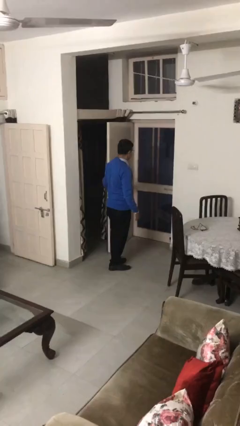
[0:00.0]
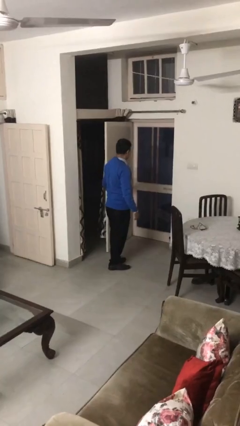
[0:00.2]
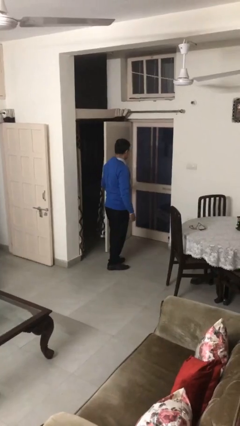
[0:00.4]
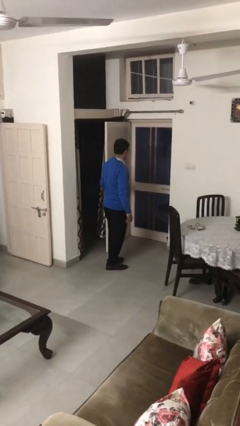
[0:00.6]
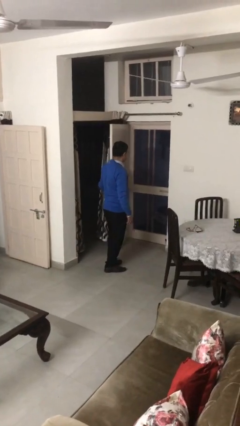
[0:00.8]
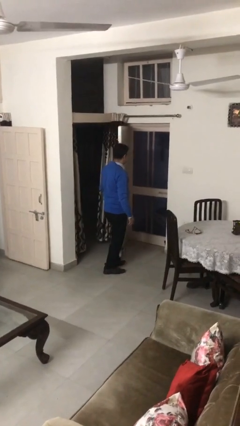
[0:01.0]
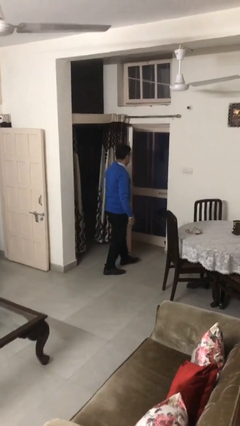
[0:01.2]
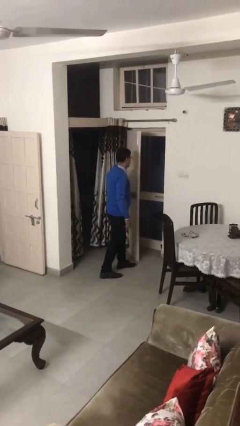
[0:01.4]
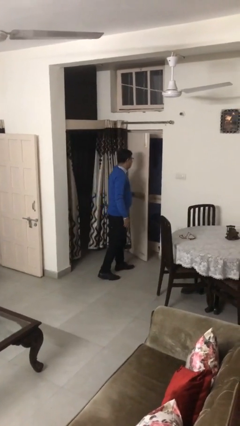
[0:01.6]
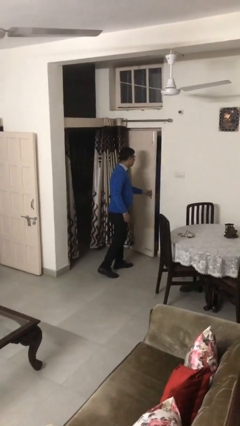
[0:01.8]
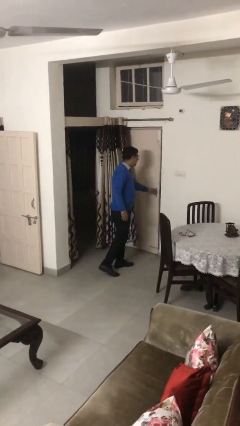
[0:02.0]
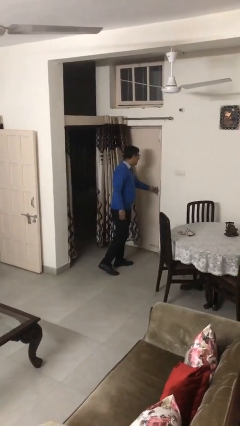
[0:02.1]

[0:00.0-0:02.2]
person closes facility door

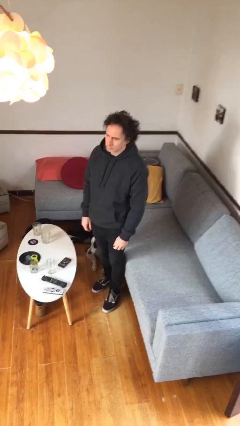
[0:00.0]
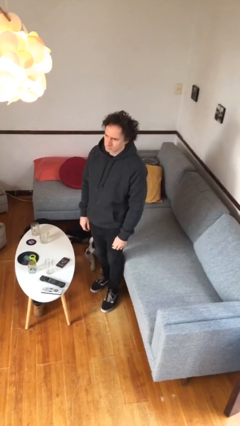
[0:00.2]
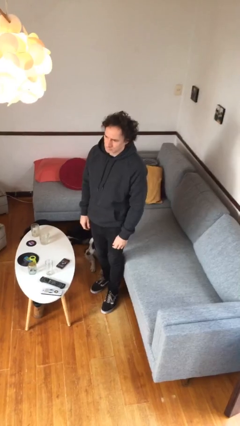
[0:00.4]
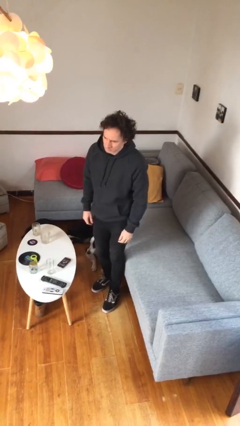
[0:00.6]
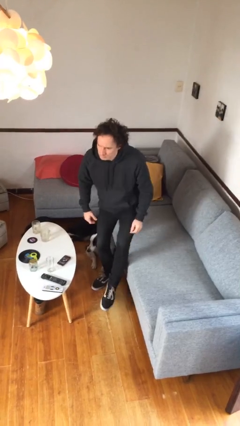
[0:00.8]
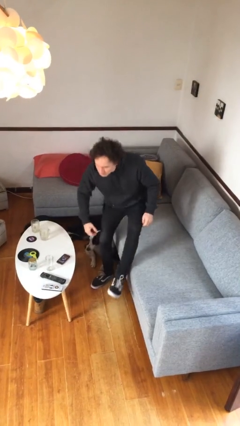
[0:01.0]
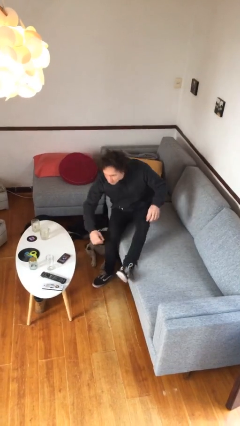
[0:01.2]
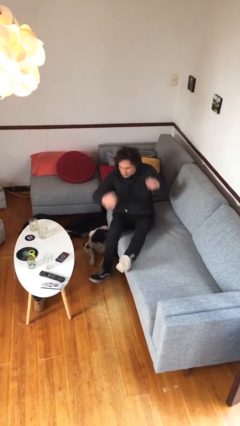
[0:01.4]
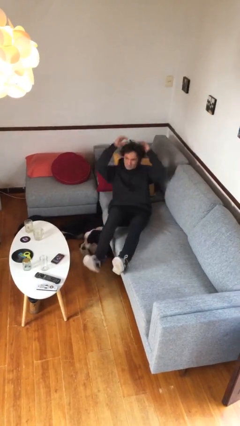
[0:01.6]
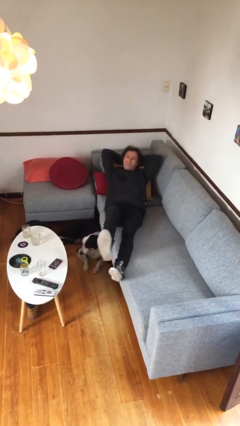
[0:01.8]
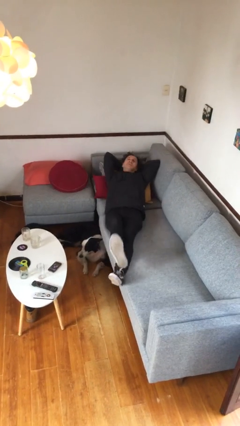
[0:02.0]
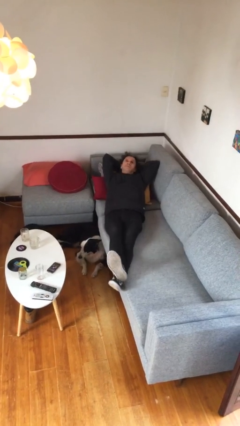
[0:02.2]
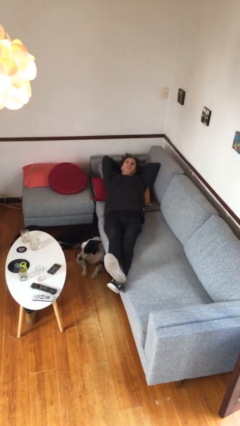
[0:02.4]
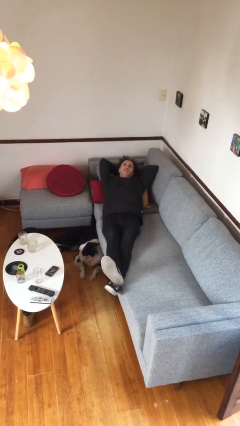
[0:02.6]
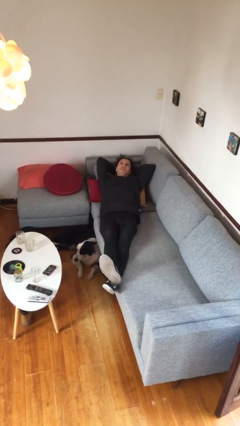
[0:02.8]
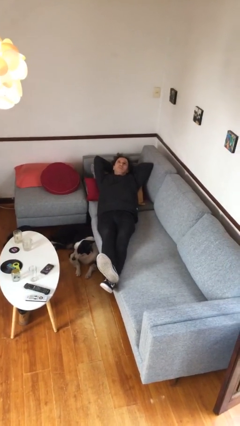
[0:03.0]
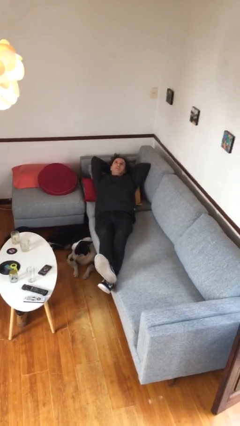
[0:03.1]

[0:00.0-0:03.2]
person lies down on couch

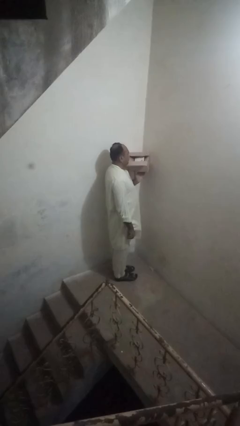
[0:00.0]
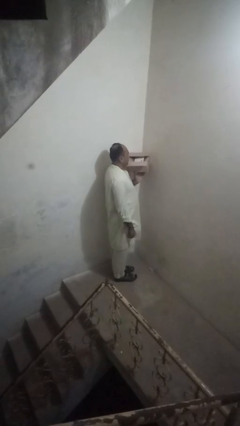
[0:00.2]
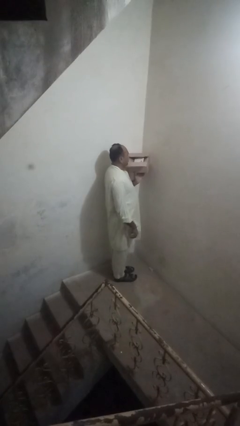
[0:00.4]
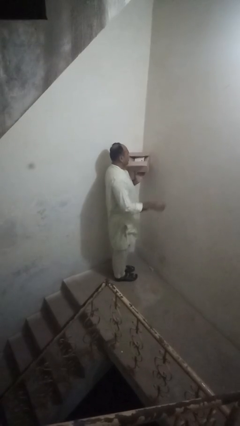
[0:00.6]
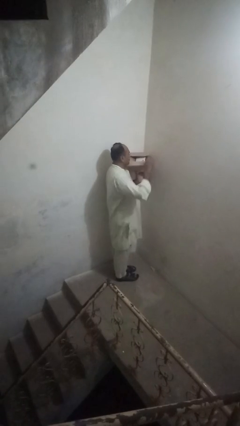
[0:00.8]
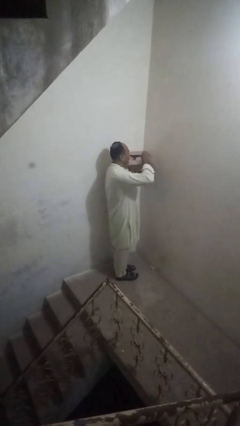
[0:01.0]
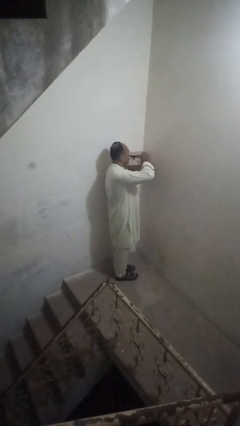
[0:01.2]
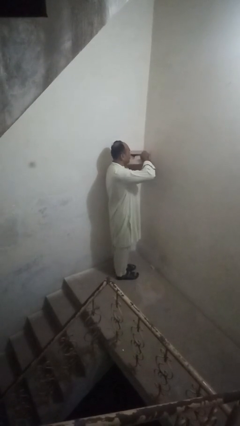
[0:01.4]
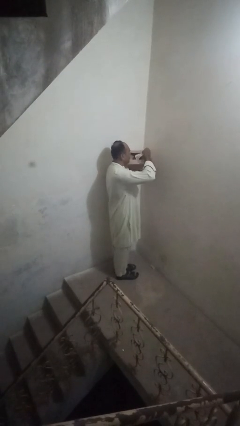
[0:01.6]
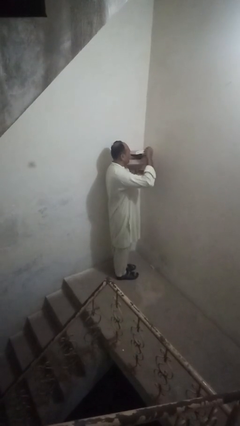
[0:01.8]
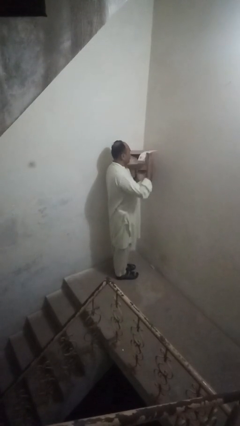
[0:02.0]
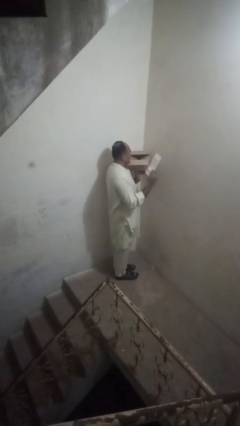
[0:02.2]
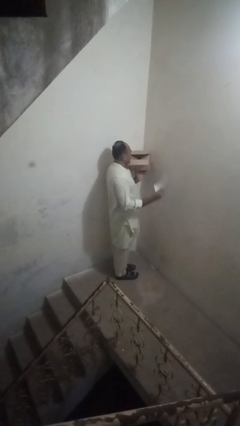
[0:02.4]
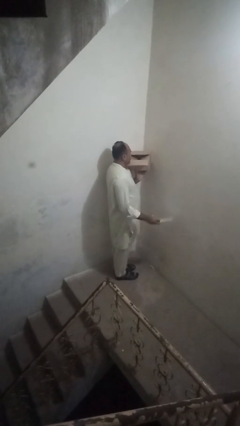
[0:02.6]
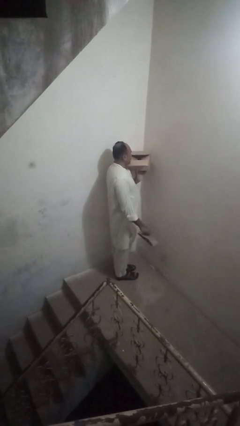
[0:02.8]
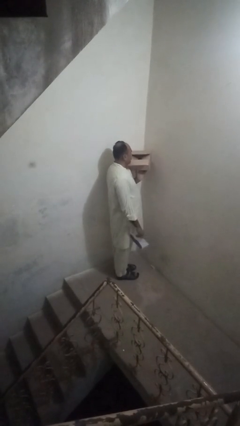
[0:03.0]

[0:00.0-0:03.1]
person takes letters from mailbox

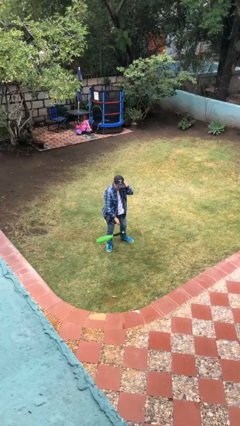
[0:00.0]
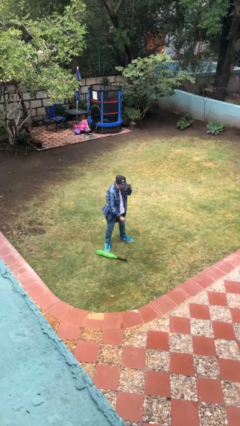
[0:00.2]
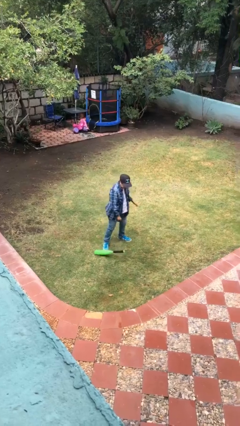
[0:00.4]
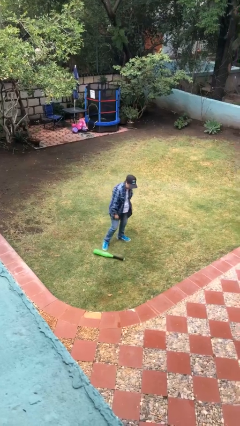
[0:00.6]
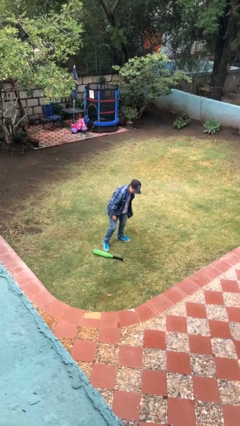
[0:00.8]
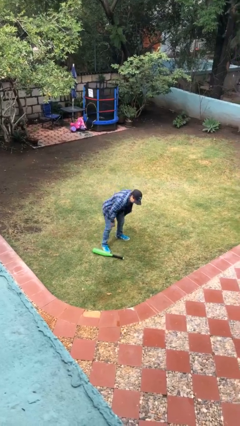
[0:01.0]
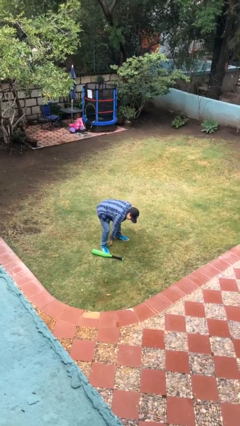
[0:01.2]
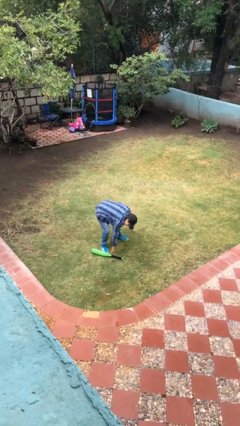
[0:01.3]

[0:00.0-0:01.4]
person drops object

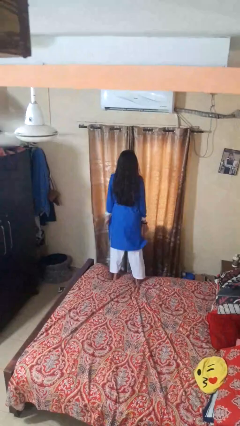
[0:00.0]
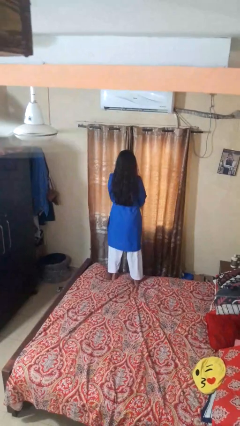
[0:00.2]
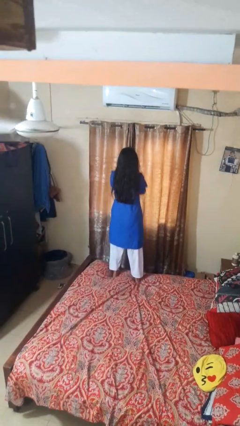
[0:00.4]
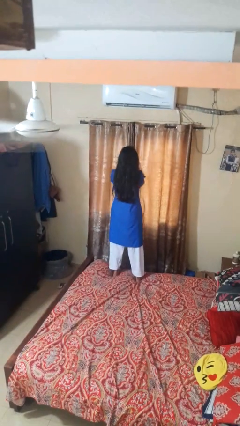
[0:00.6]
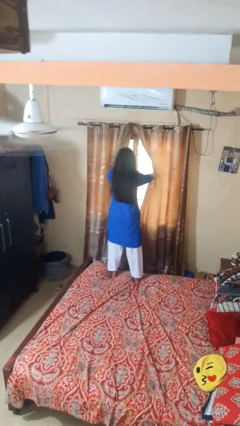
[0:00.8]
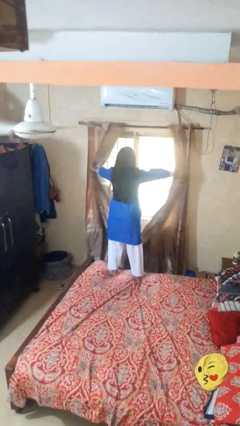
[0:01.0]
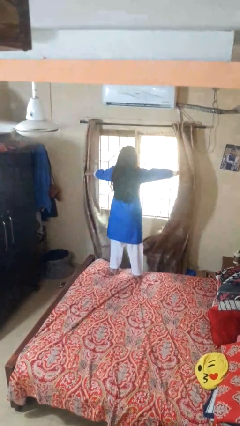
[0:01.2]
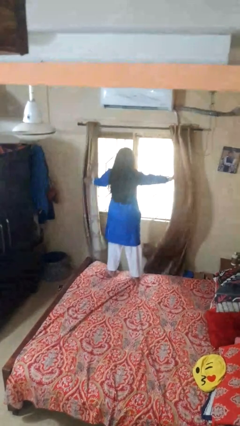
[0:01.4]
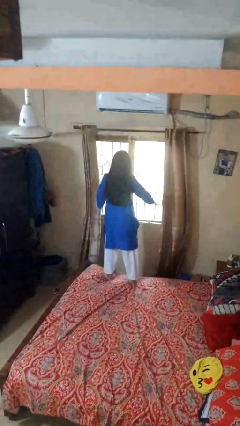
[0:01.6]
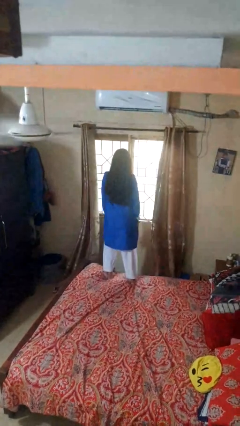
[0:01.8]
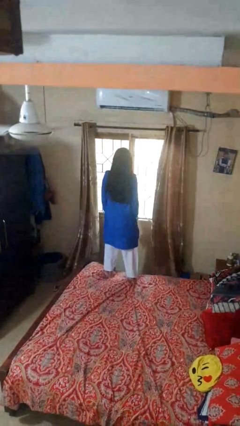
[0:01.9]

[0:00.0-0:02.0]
person opens curtains

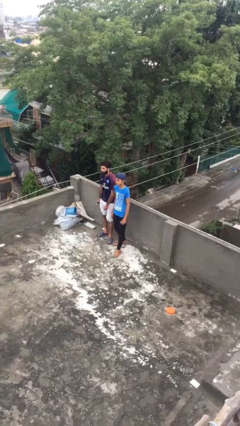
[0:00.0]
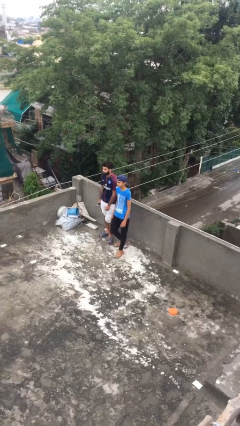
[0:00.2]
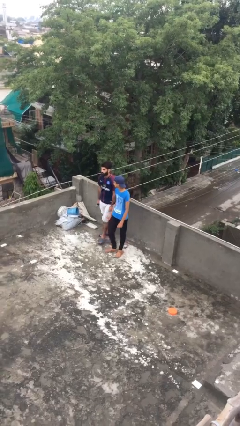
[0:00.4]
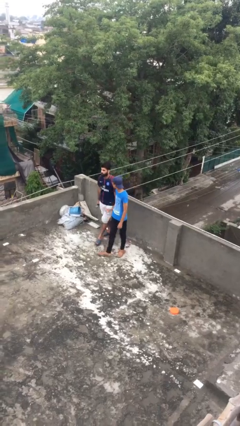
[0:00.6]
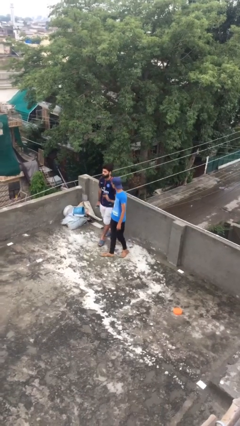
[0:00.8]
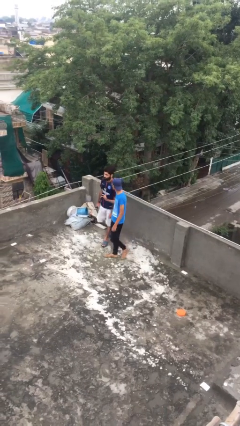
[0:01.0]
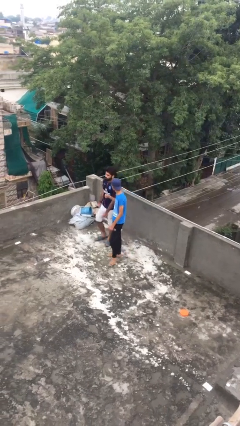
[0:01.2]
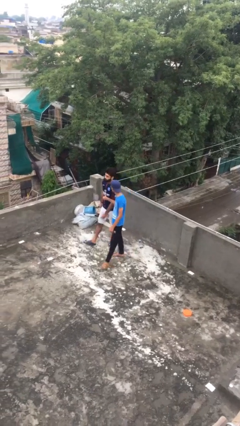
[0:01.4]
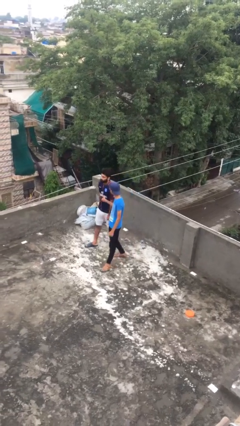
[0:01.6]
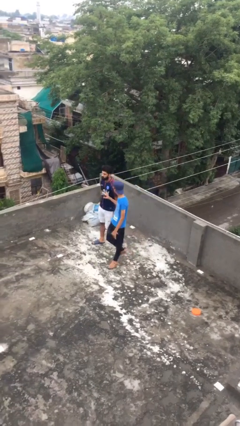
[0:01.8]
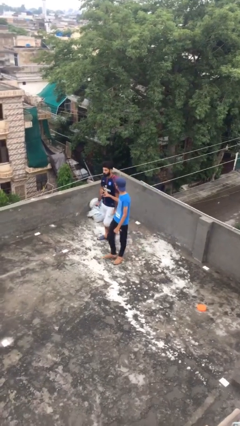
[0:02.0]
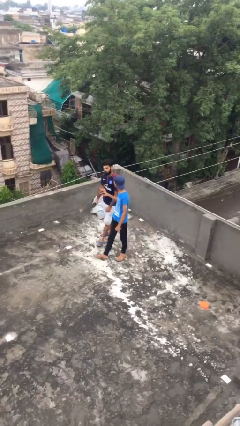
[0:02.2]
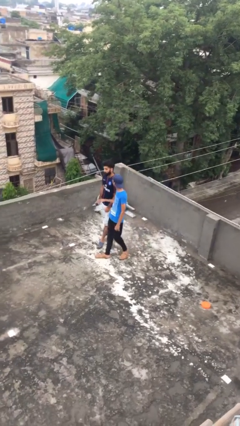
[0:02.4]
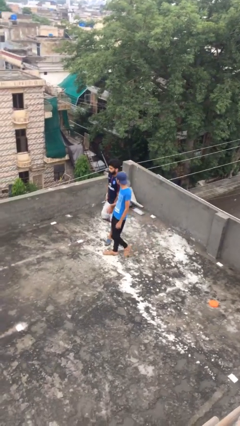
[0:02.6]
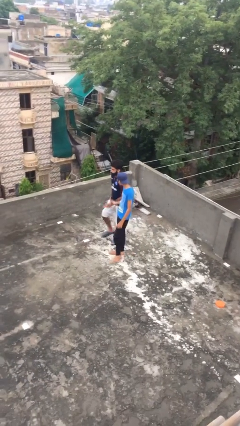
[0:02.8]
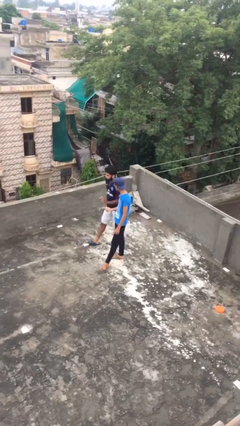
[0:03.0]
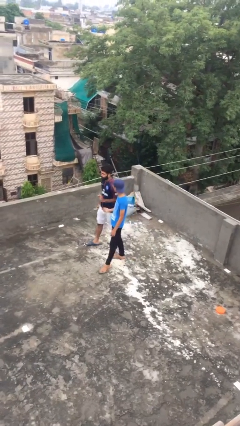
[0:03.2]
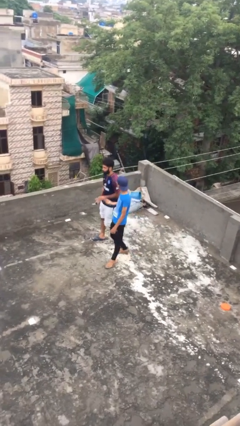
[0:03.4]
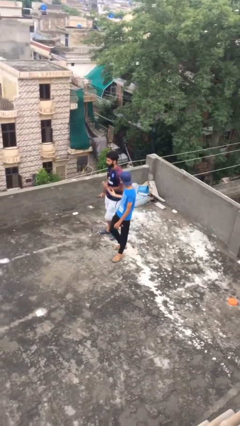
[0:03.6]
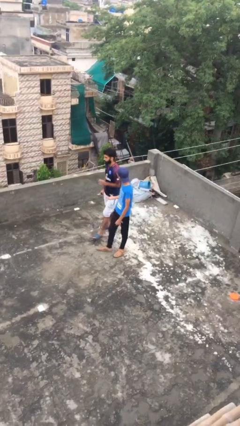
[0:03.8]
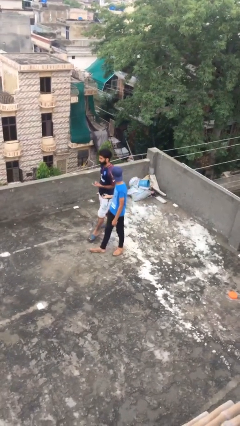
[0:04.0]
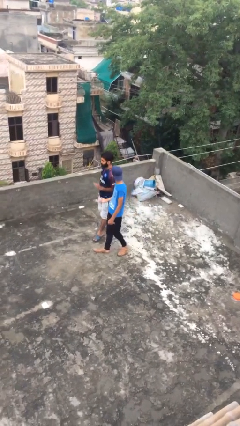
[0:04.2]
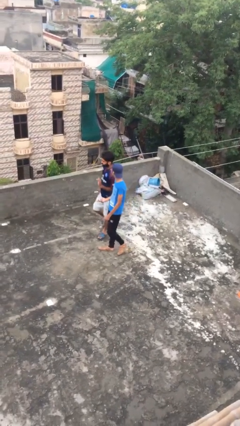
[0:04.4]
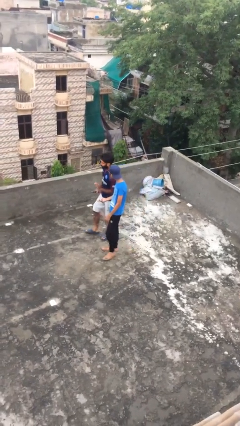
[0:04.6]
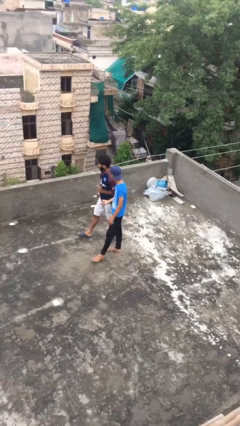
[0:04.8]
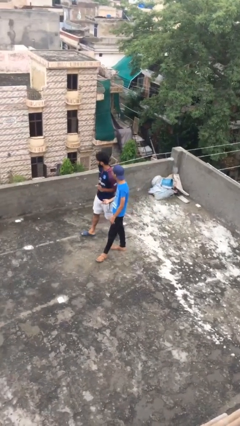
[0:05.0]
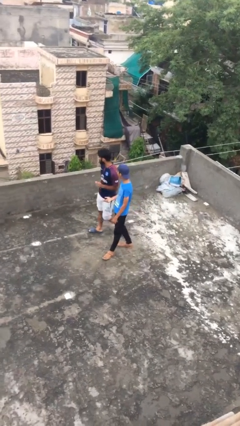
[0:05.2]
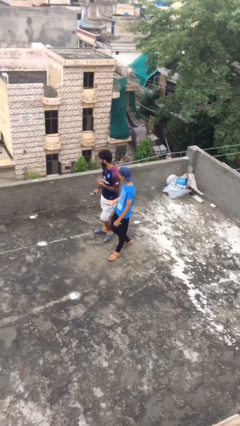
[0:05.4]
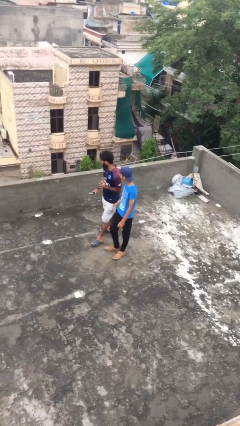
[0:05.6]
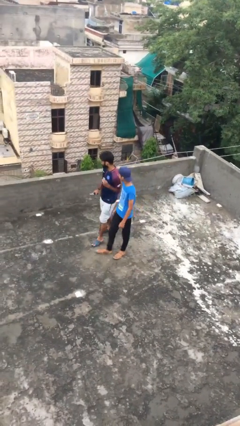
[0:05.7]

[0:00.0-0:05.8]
person talks to person
